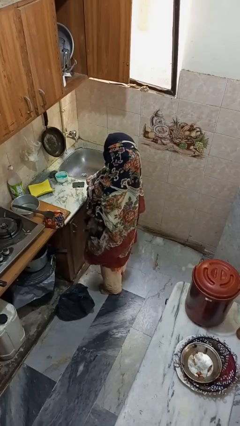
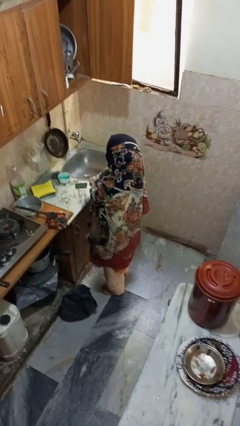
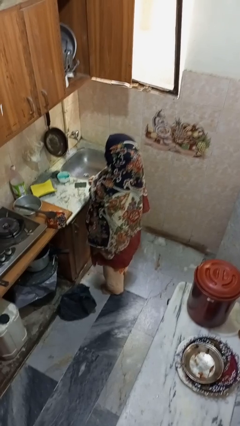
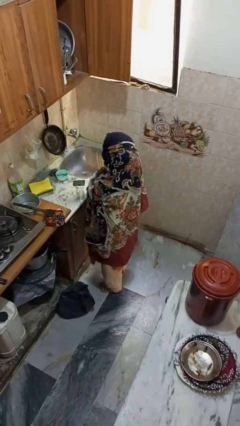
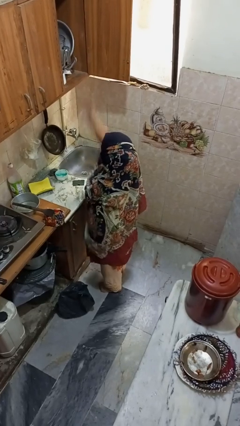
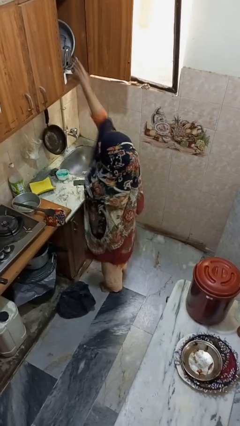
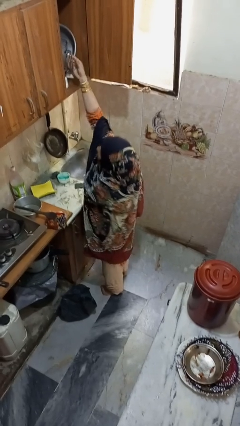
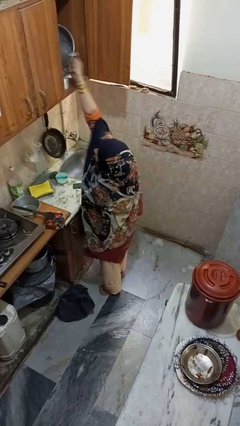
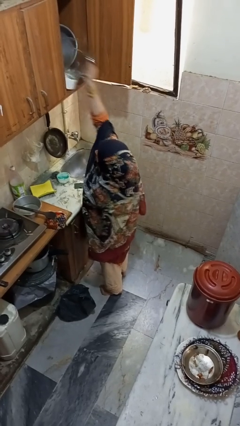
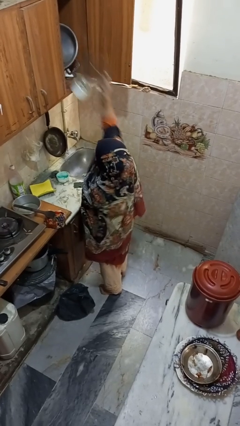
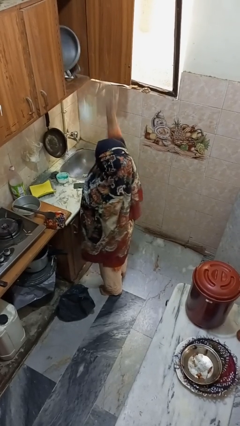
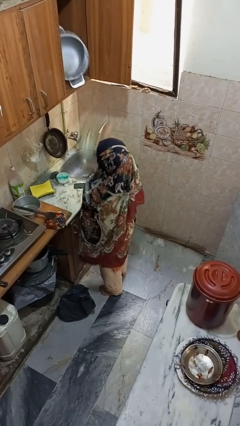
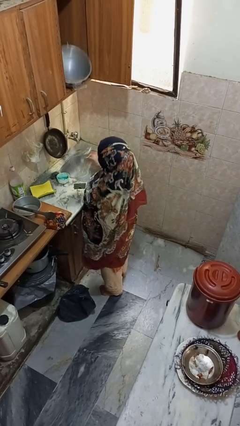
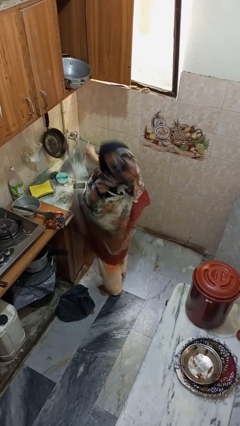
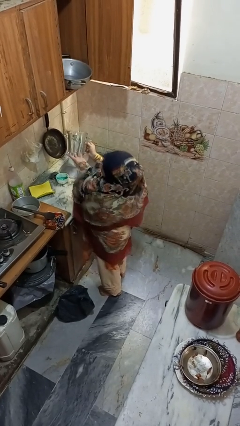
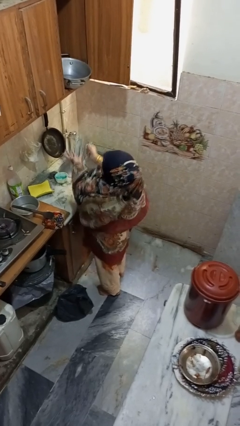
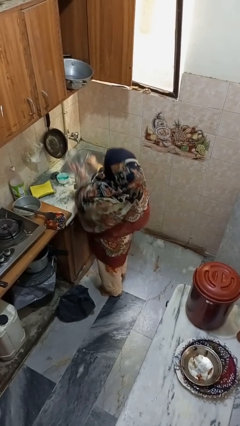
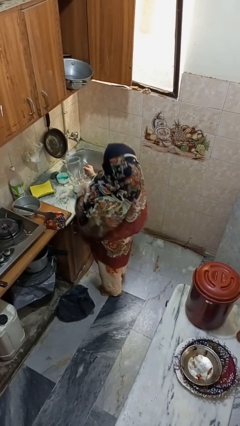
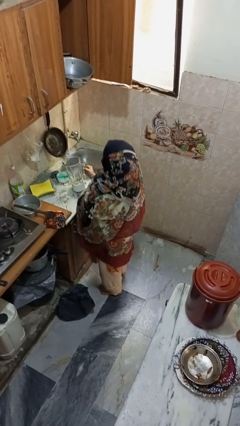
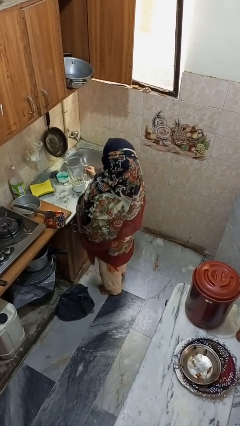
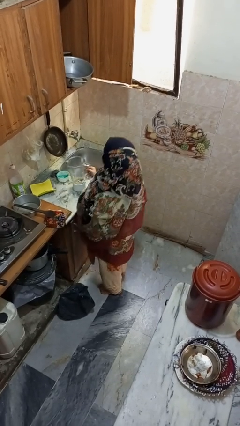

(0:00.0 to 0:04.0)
person puts object in cabinet

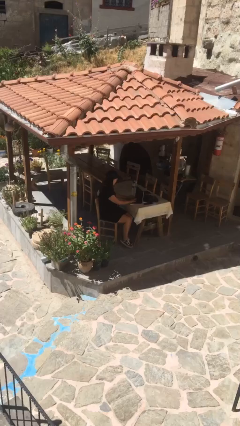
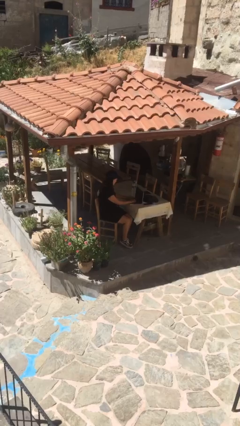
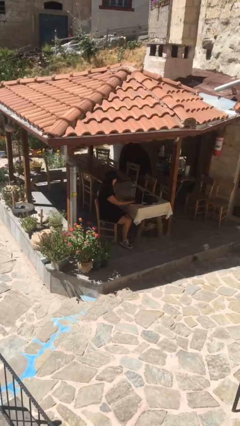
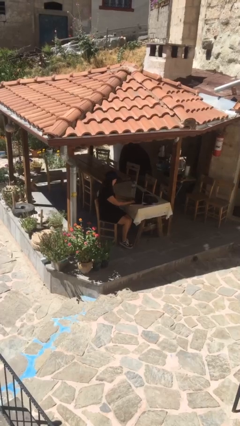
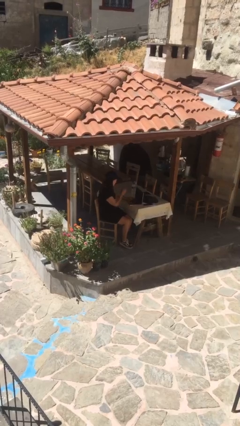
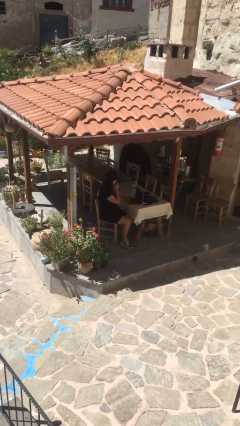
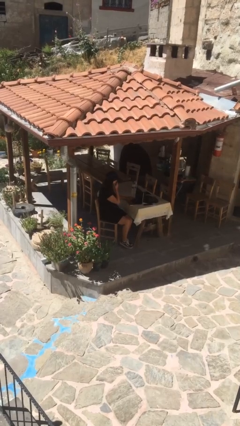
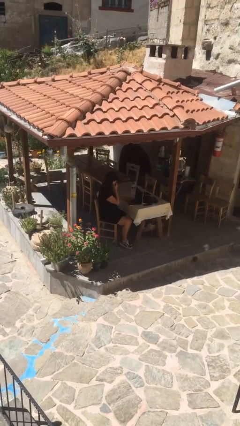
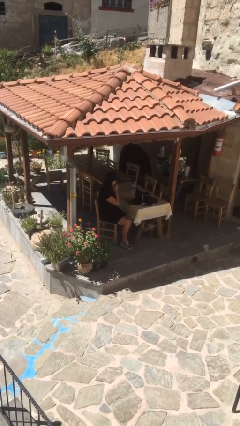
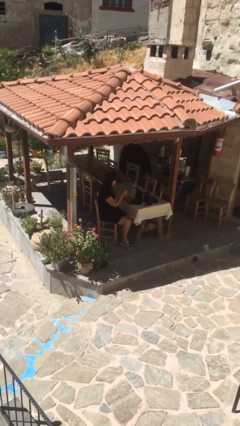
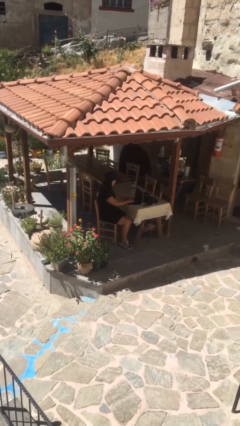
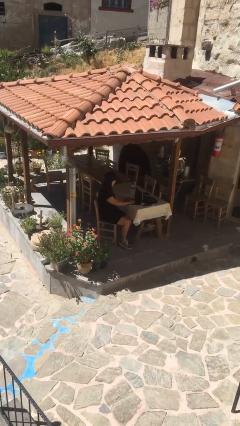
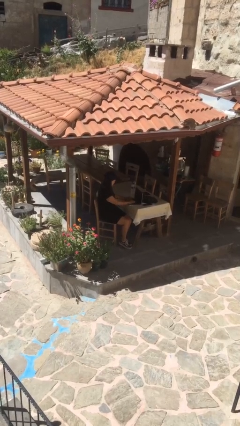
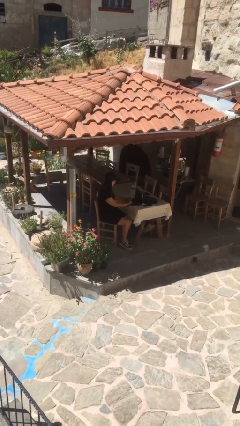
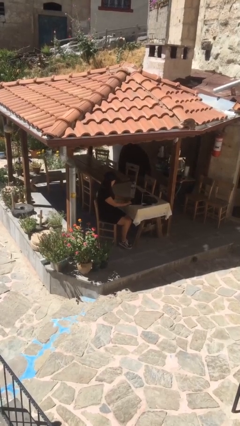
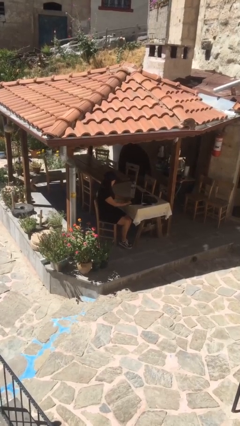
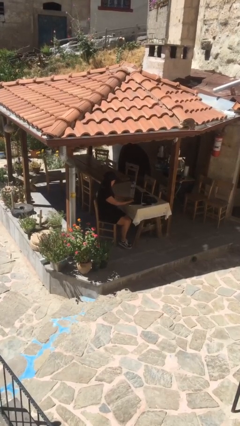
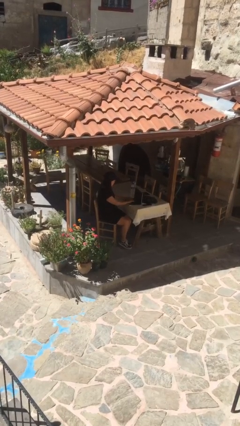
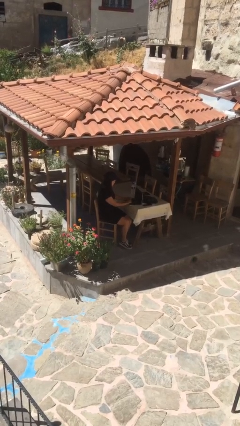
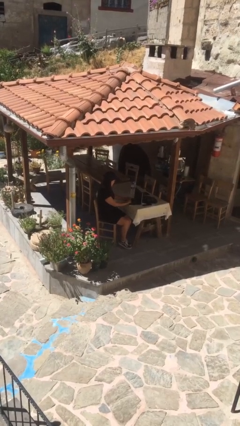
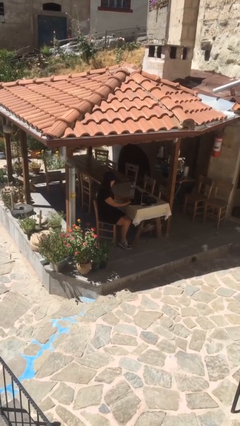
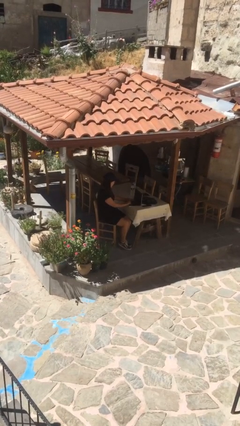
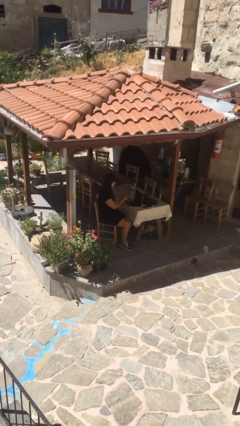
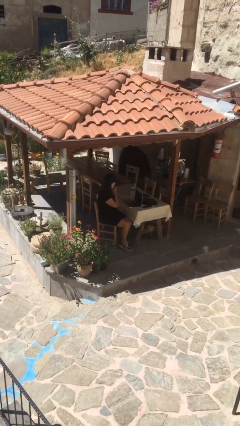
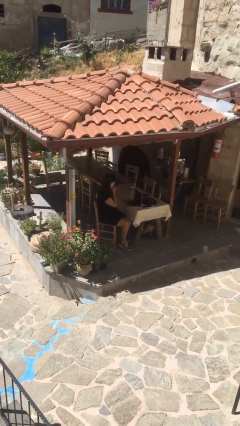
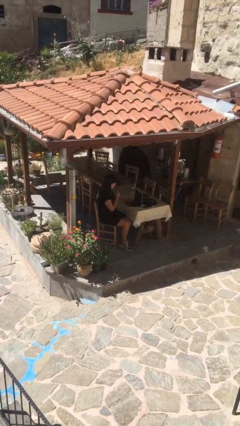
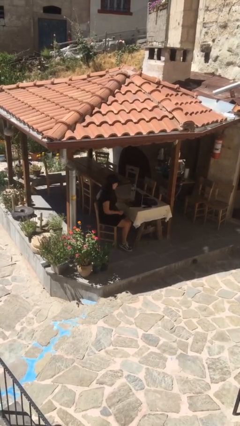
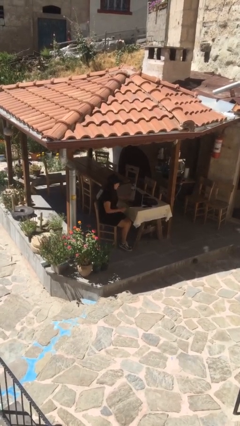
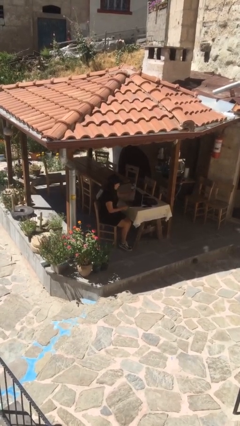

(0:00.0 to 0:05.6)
person interacts with laptop

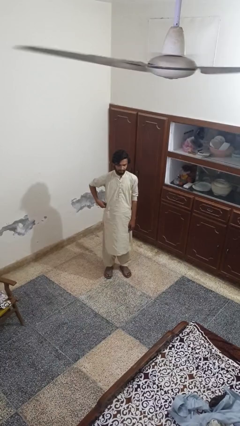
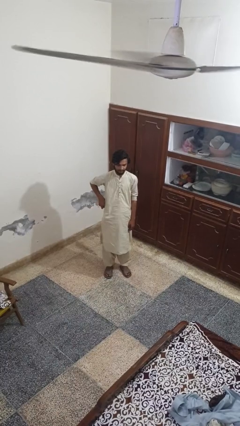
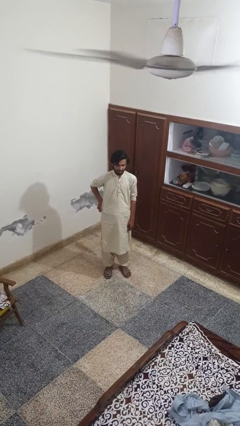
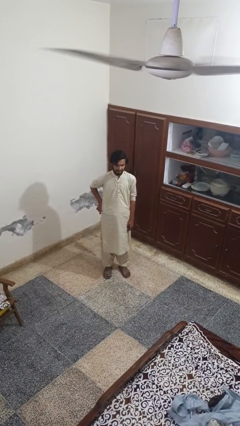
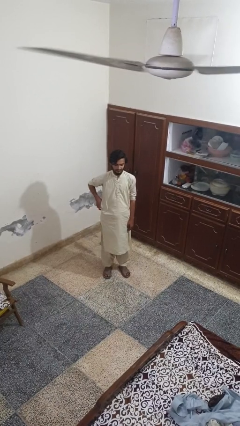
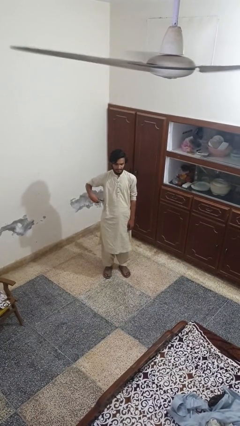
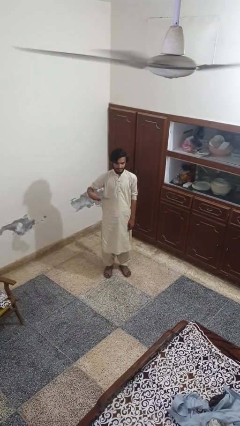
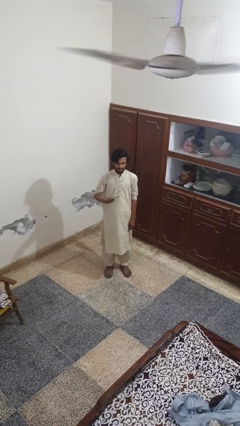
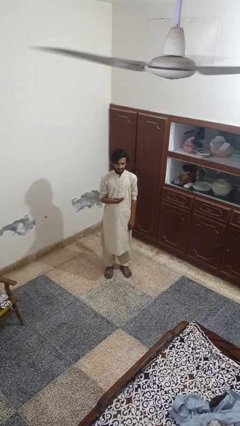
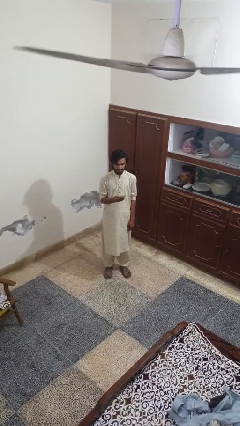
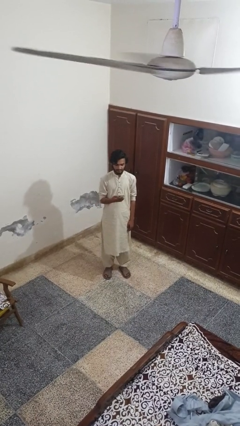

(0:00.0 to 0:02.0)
person takes phone from pocket

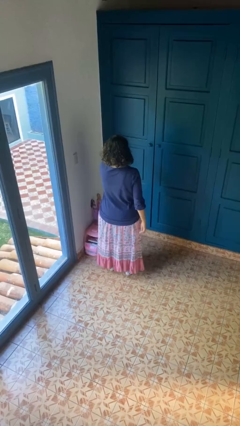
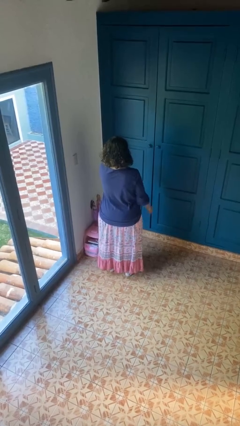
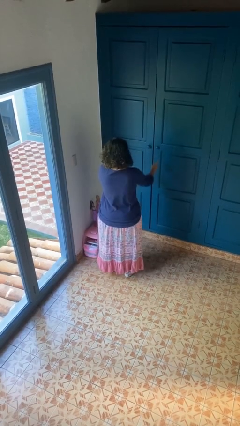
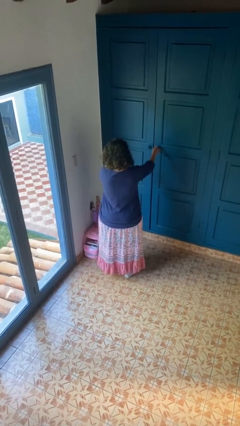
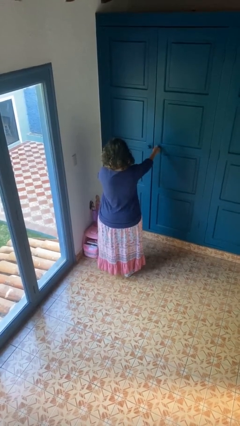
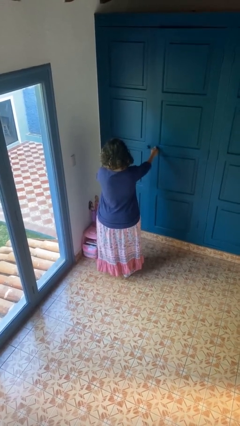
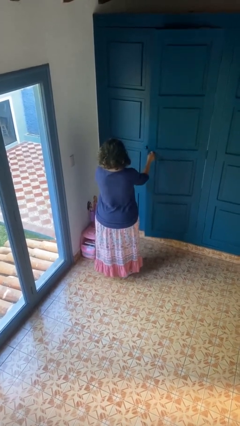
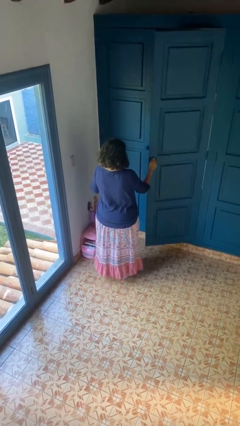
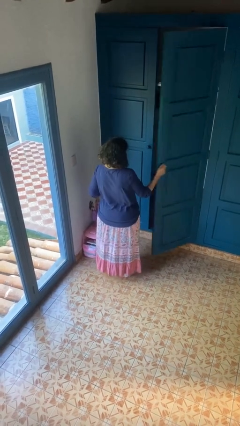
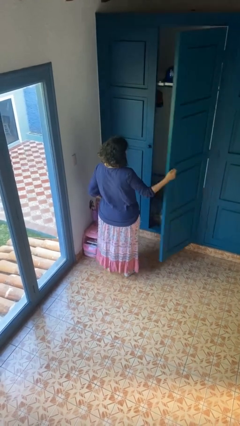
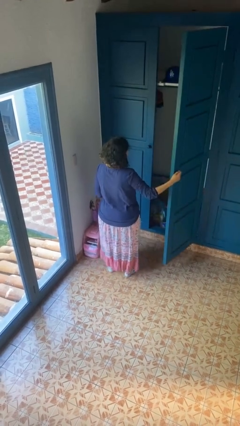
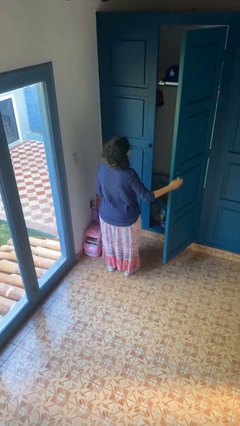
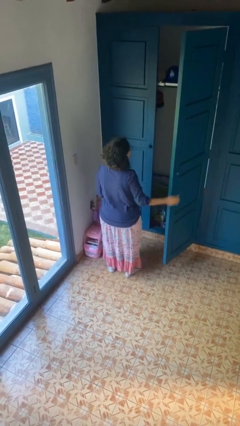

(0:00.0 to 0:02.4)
person opens closet door

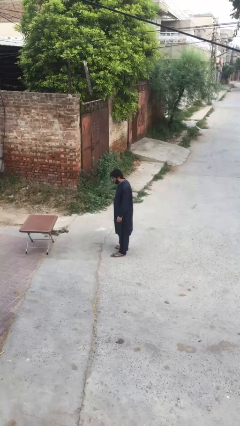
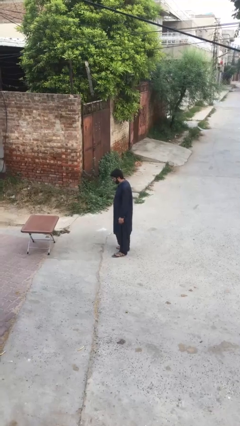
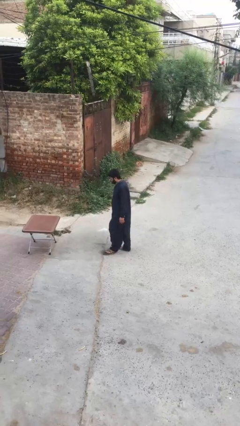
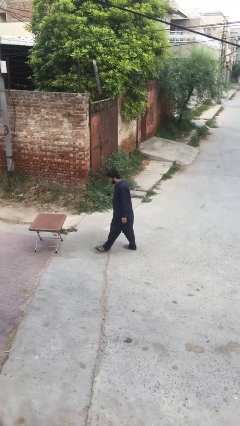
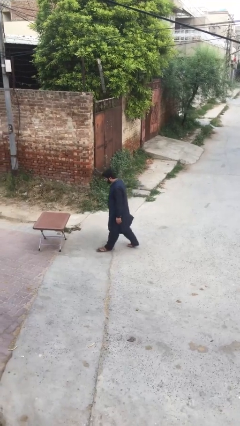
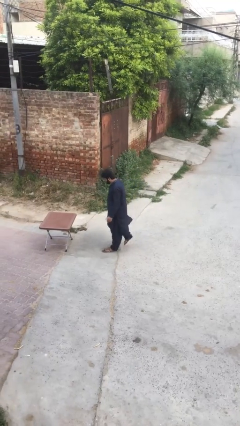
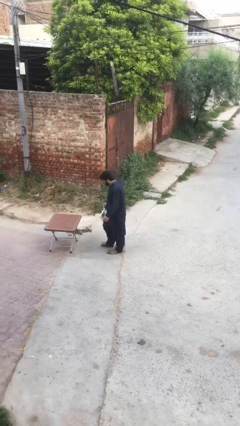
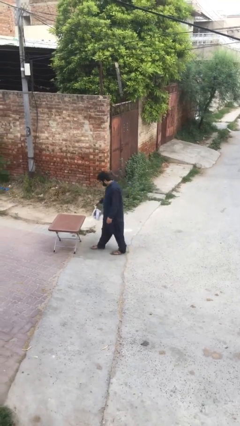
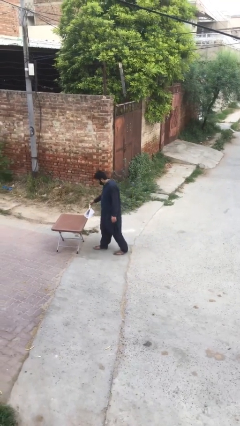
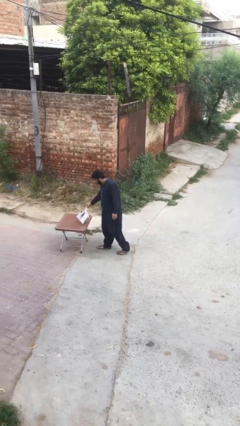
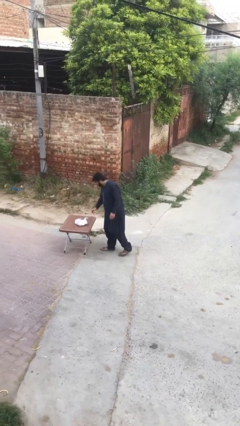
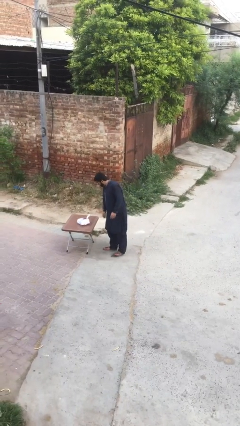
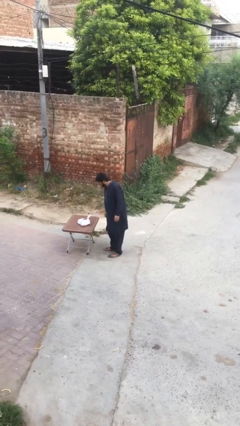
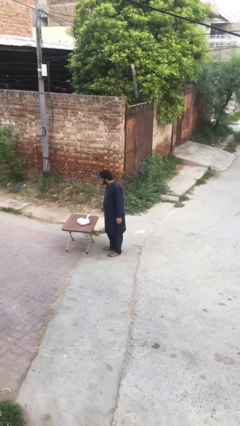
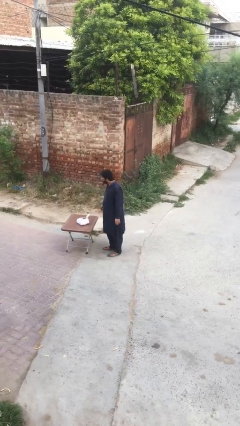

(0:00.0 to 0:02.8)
person puts down object on table

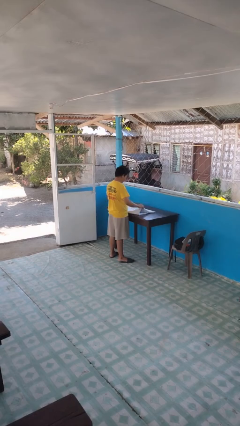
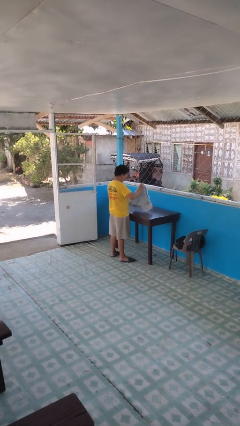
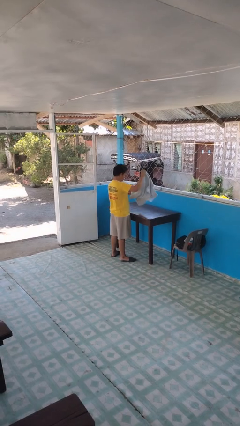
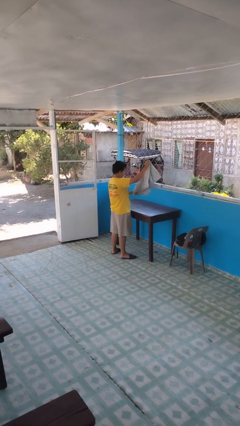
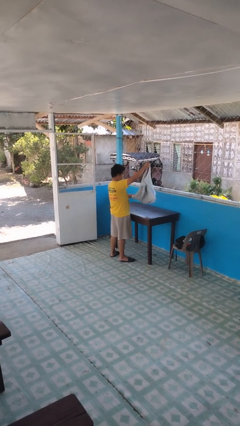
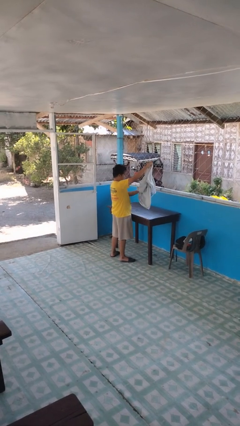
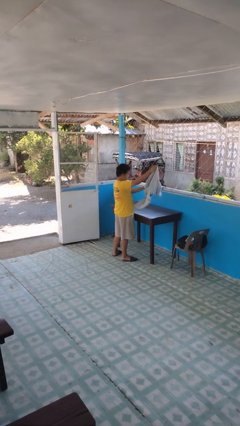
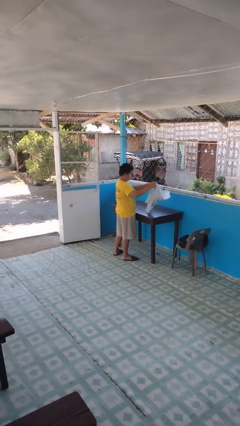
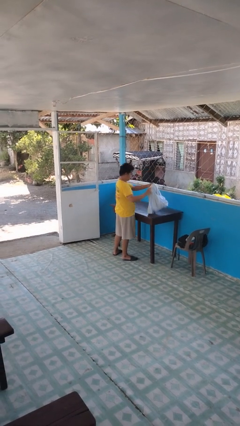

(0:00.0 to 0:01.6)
person unfolds blanket
